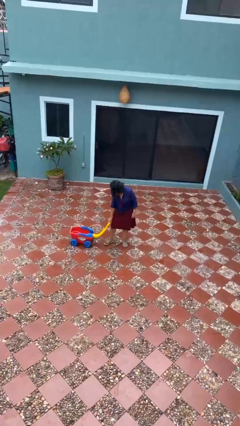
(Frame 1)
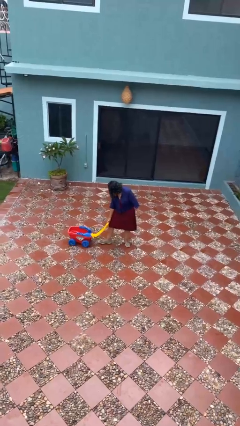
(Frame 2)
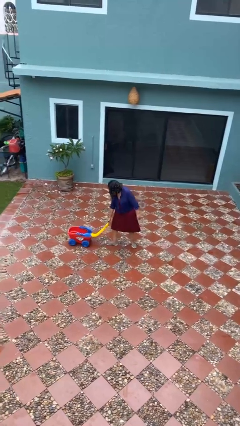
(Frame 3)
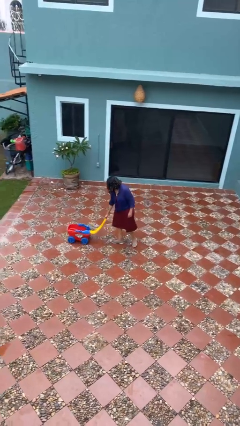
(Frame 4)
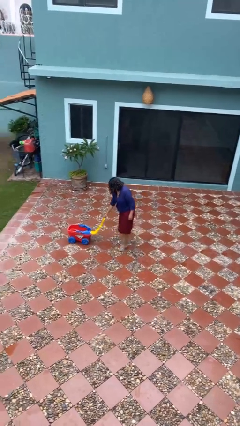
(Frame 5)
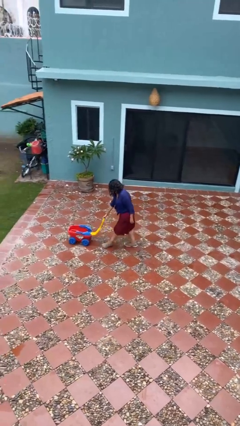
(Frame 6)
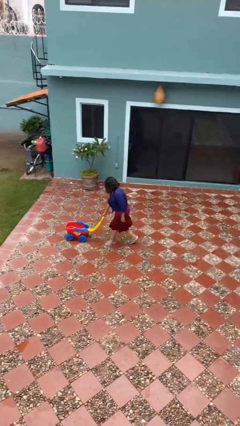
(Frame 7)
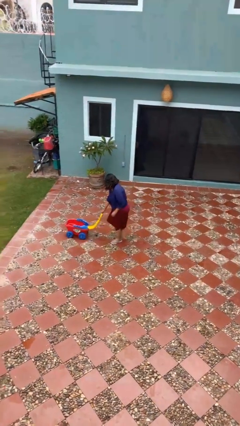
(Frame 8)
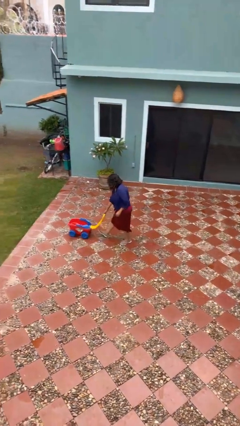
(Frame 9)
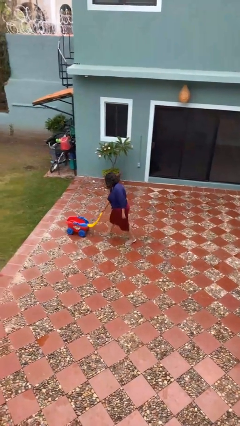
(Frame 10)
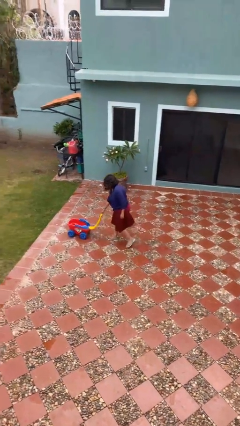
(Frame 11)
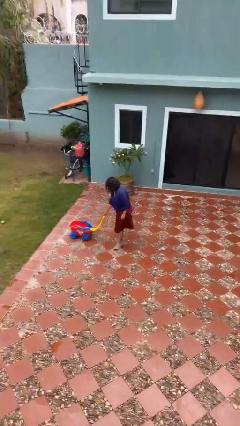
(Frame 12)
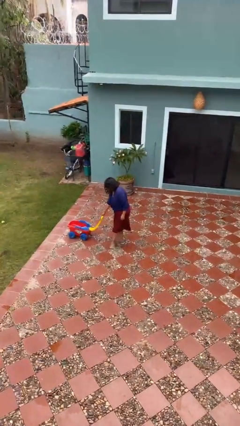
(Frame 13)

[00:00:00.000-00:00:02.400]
person pushes wheeled cart

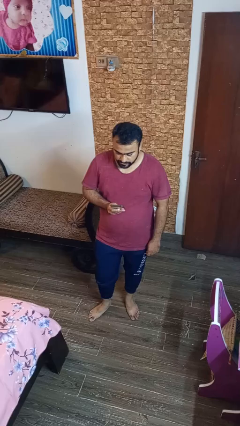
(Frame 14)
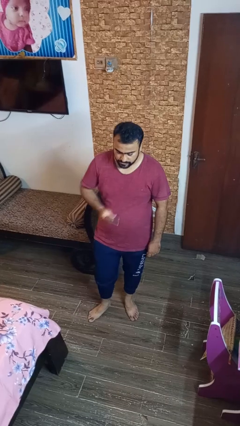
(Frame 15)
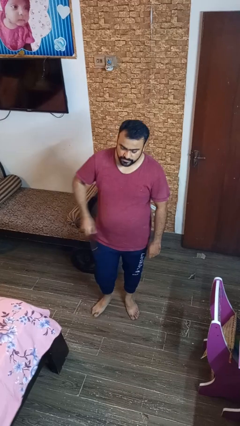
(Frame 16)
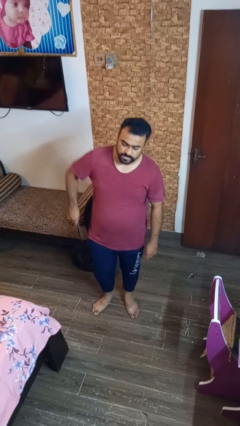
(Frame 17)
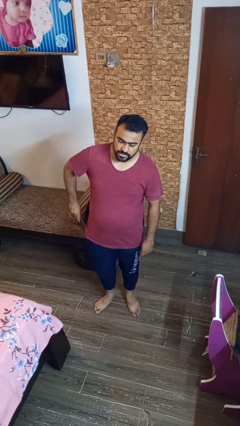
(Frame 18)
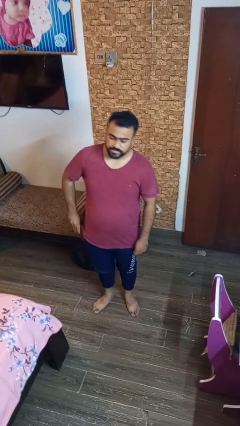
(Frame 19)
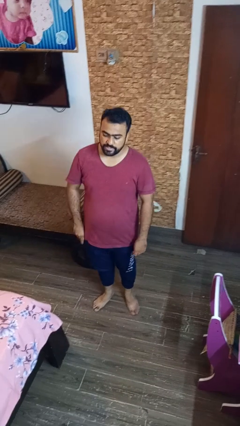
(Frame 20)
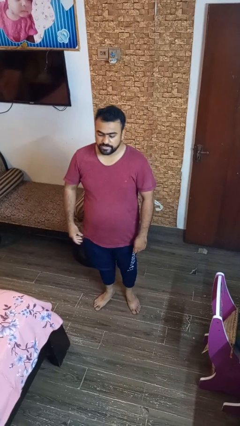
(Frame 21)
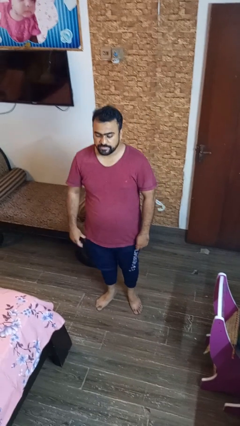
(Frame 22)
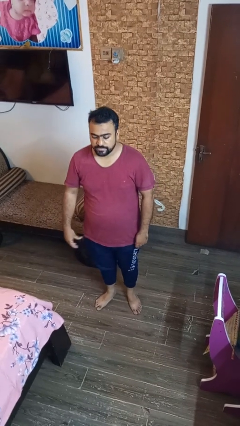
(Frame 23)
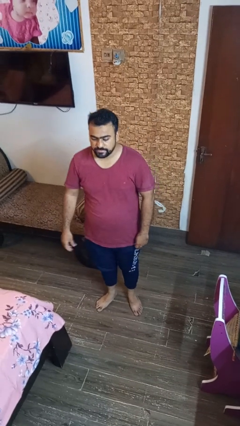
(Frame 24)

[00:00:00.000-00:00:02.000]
person puts phone into pocket

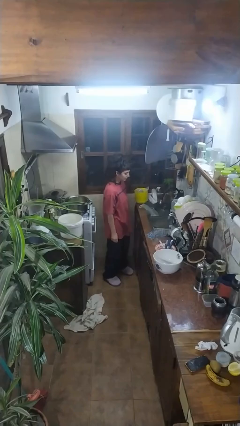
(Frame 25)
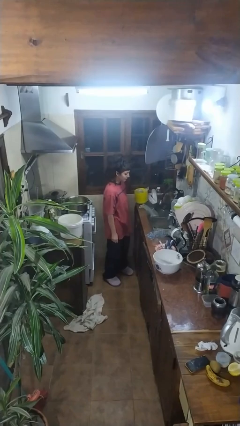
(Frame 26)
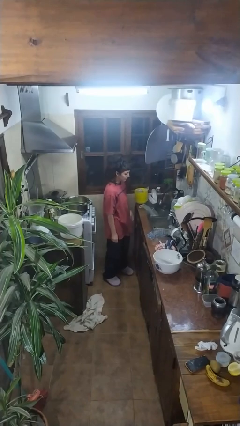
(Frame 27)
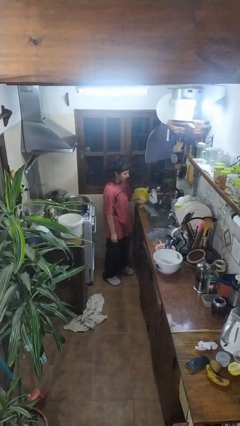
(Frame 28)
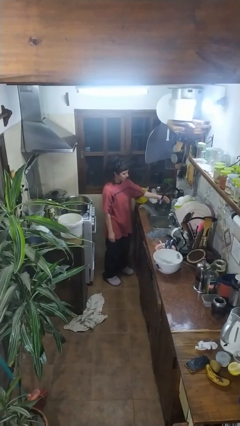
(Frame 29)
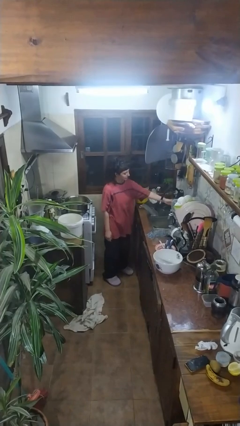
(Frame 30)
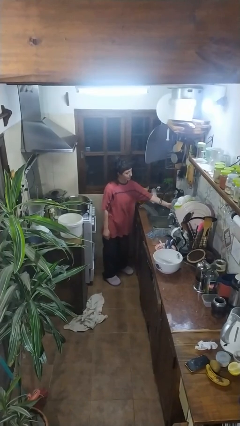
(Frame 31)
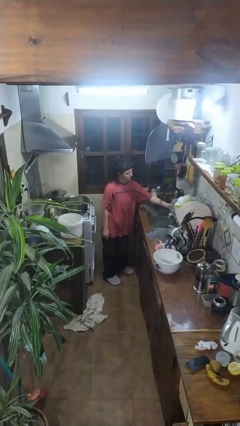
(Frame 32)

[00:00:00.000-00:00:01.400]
person turns on faucet

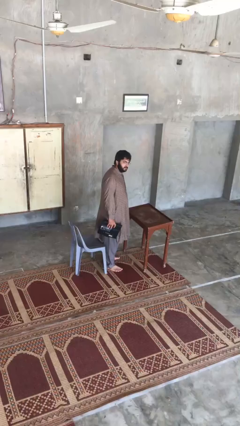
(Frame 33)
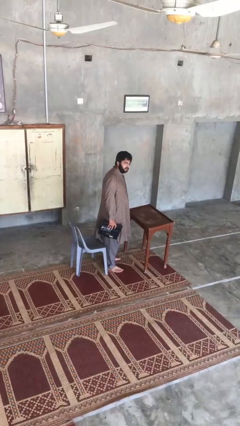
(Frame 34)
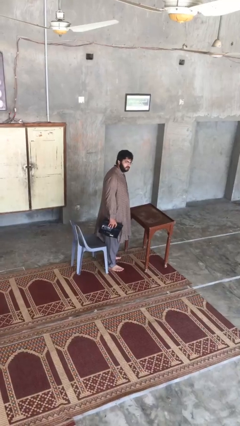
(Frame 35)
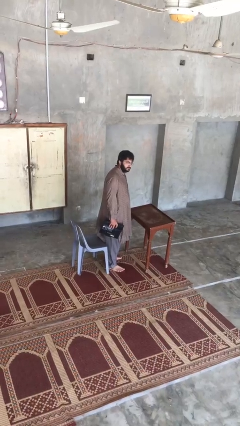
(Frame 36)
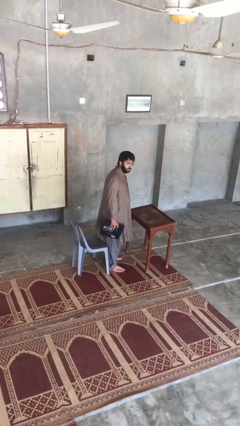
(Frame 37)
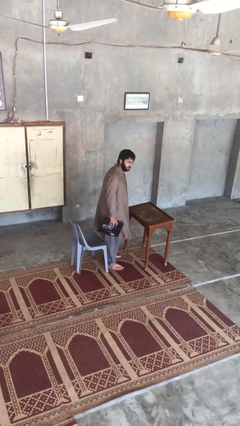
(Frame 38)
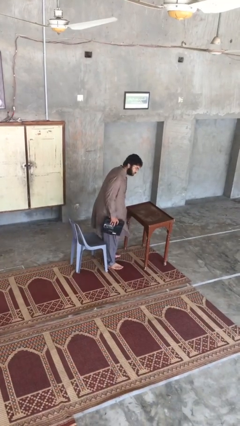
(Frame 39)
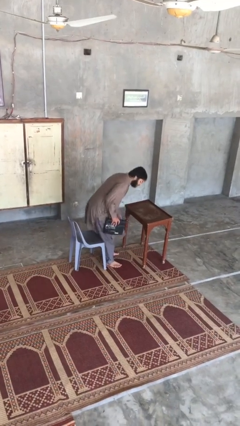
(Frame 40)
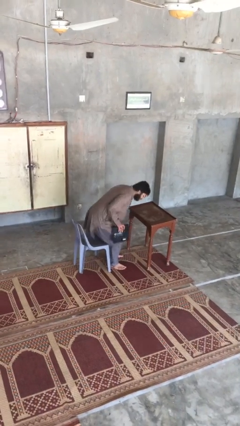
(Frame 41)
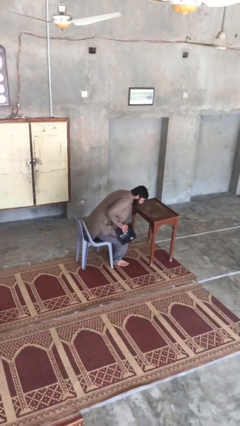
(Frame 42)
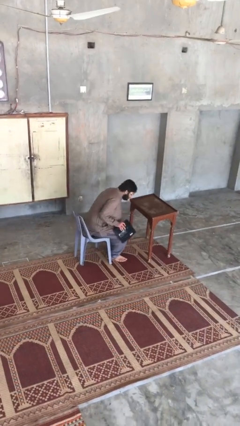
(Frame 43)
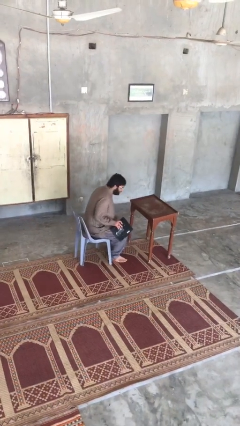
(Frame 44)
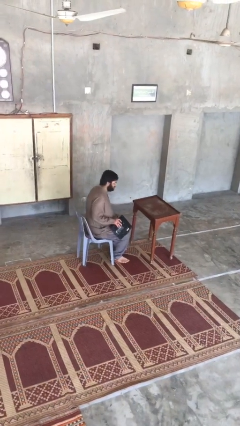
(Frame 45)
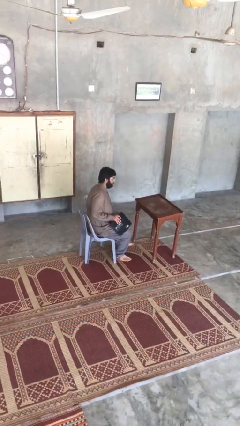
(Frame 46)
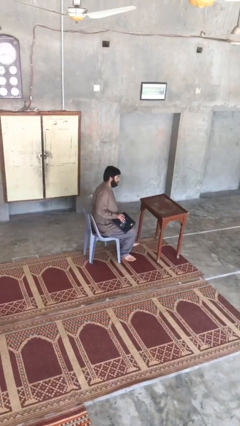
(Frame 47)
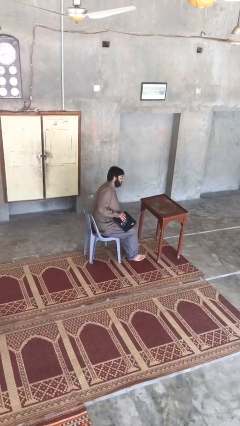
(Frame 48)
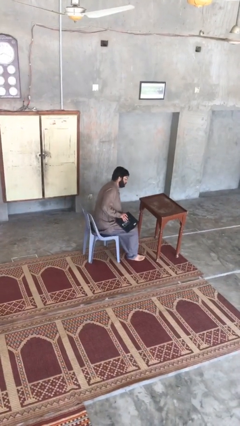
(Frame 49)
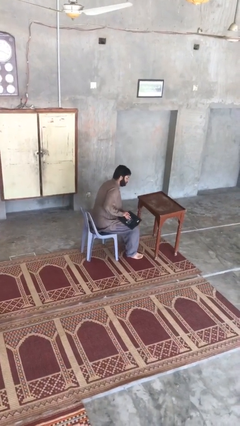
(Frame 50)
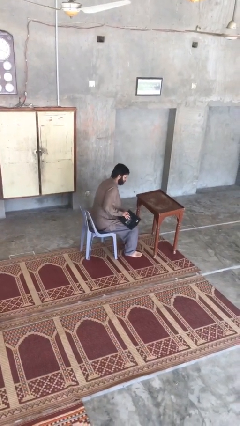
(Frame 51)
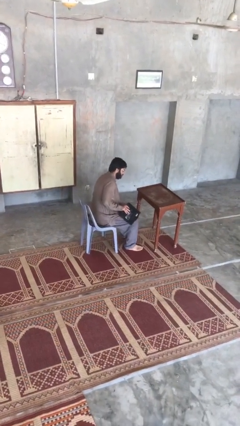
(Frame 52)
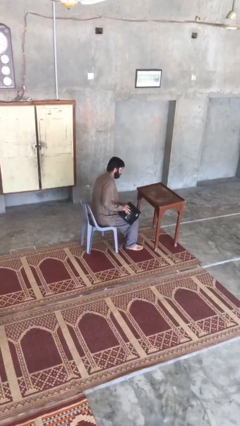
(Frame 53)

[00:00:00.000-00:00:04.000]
person sits down

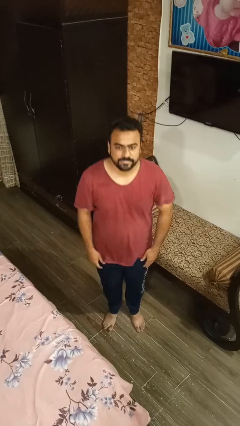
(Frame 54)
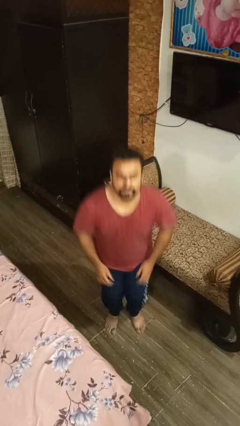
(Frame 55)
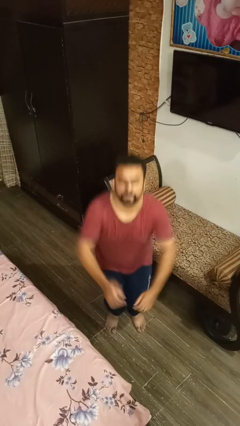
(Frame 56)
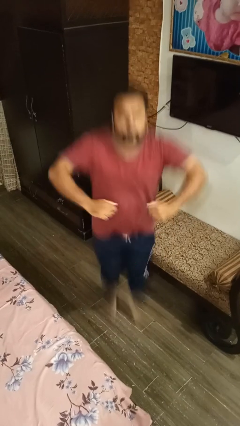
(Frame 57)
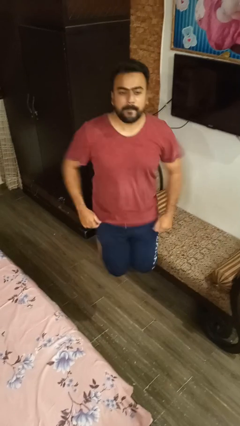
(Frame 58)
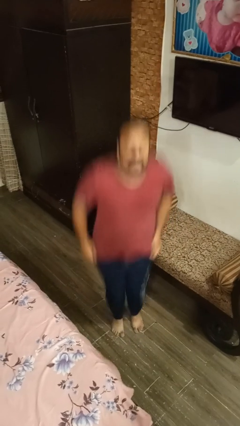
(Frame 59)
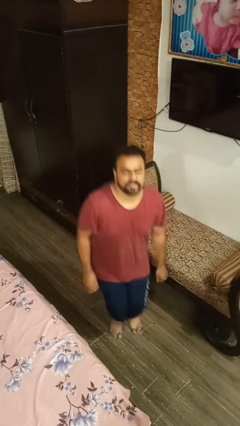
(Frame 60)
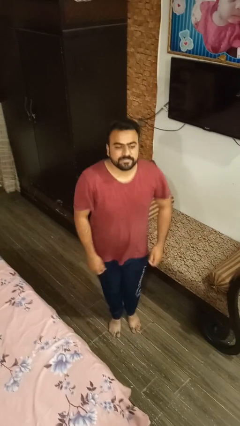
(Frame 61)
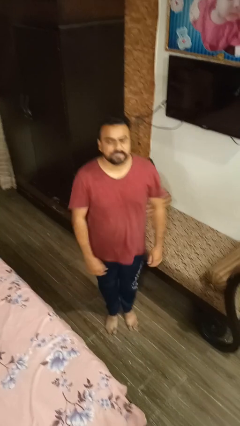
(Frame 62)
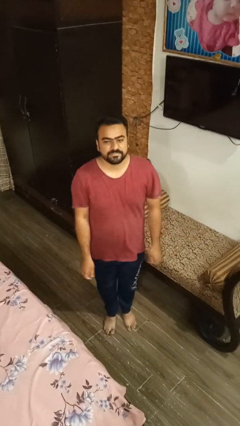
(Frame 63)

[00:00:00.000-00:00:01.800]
person jumps

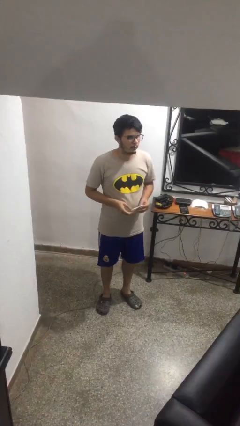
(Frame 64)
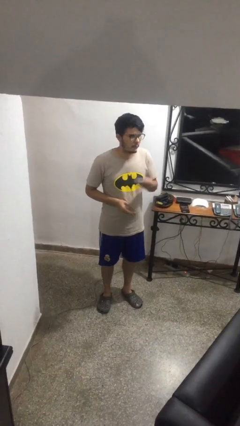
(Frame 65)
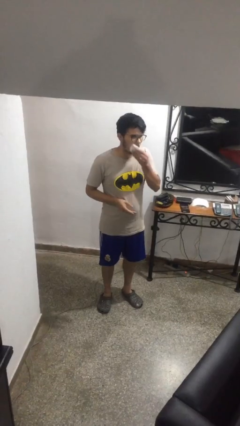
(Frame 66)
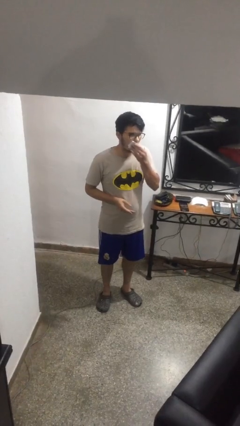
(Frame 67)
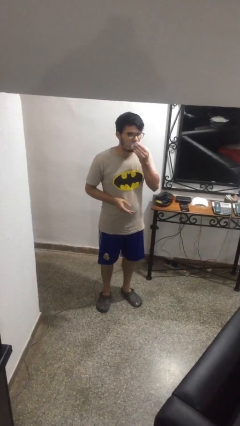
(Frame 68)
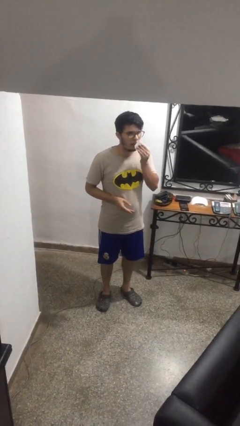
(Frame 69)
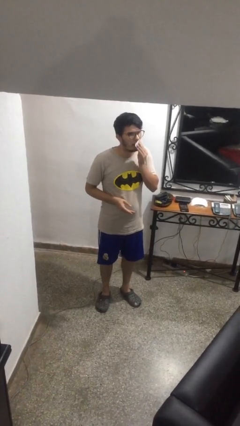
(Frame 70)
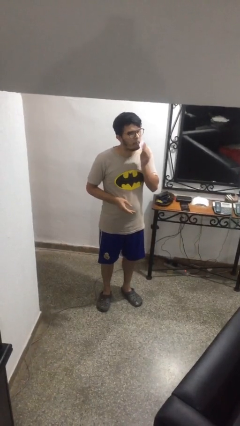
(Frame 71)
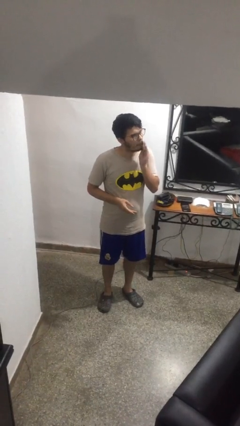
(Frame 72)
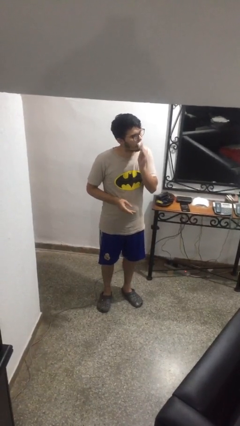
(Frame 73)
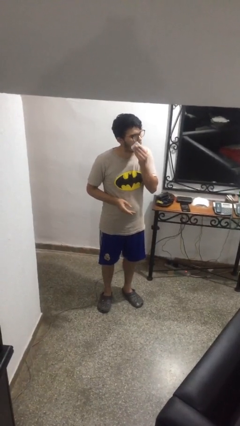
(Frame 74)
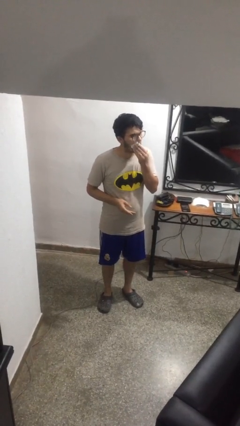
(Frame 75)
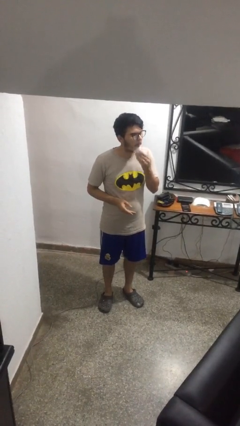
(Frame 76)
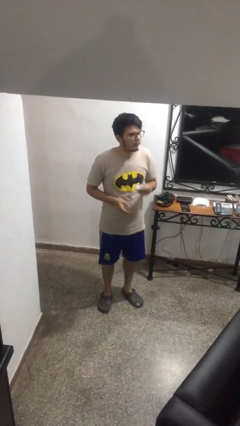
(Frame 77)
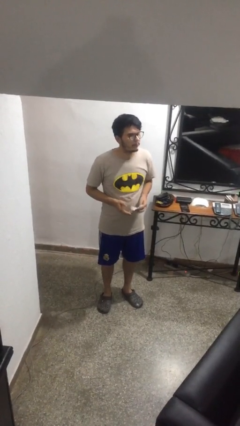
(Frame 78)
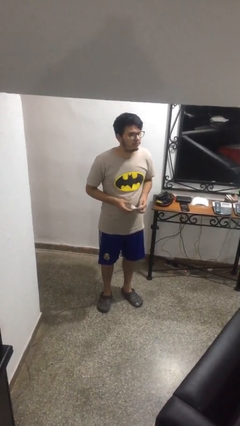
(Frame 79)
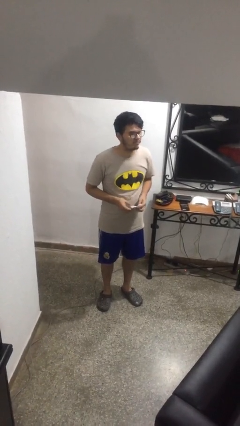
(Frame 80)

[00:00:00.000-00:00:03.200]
person wipes mouth with napkin

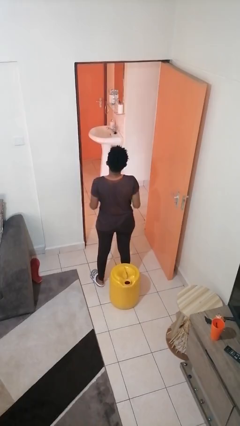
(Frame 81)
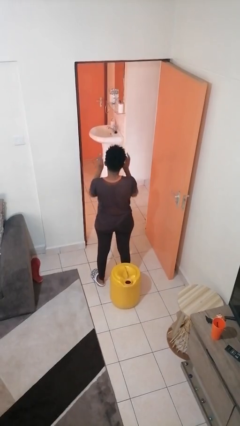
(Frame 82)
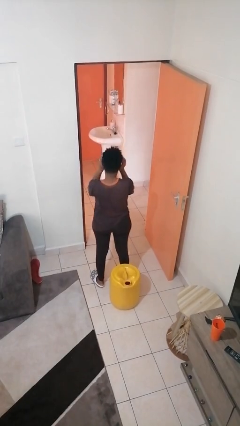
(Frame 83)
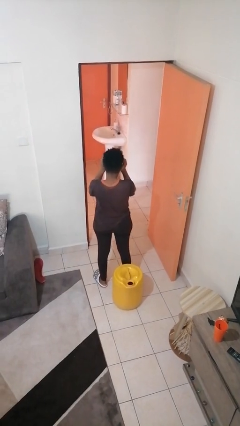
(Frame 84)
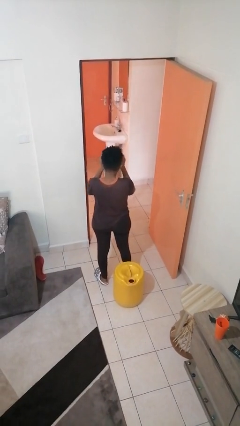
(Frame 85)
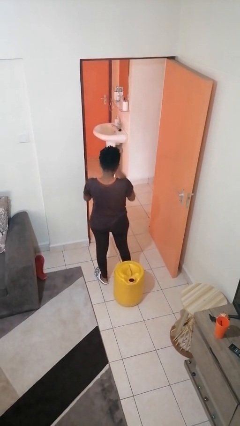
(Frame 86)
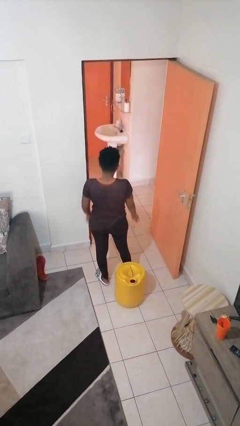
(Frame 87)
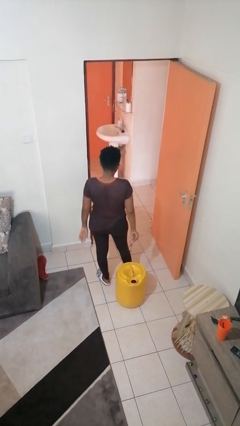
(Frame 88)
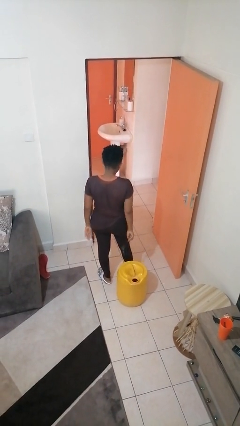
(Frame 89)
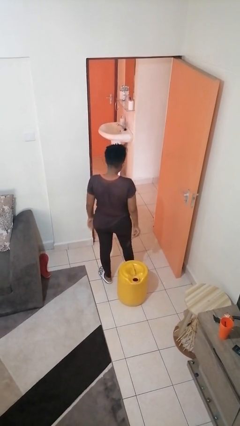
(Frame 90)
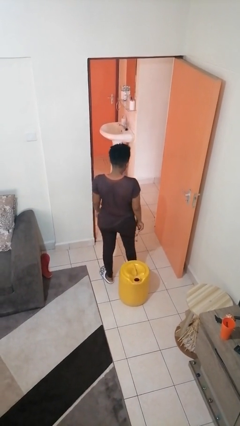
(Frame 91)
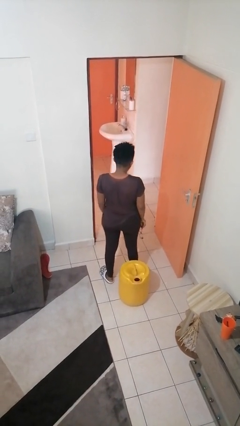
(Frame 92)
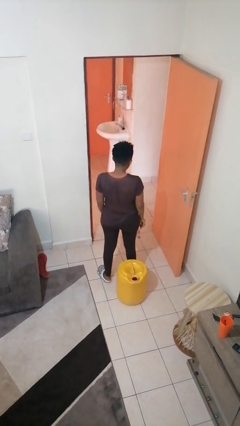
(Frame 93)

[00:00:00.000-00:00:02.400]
person takes off glasses
